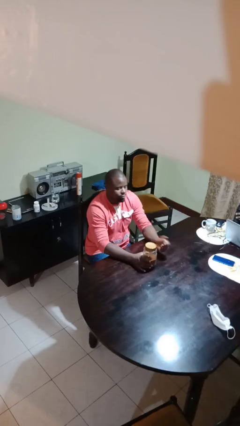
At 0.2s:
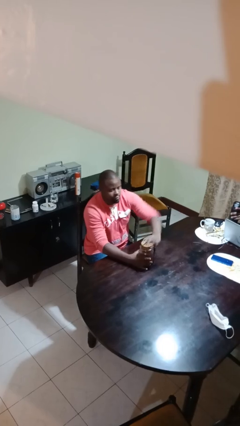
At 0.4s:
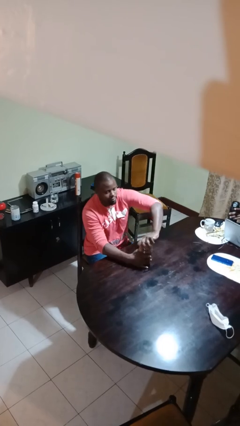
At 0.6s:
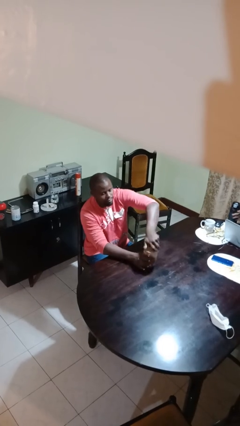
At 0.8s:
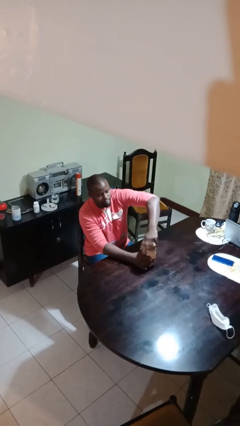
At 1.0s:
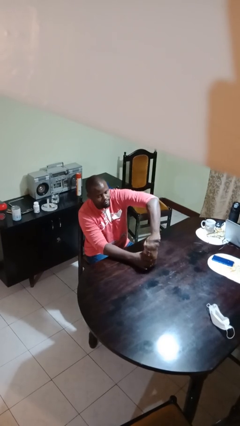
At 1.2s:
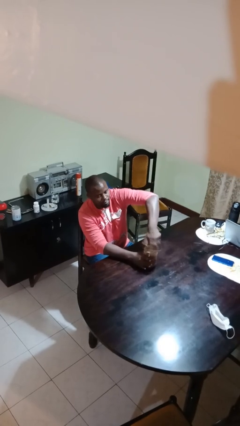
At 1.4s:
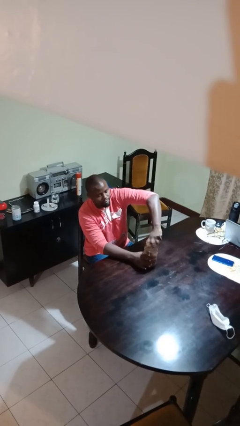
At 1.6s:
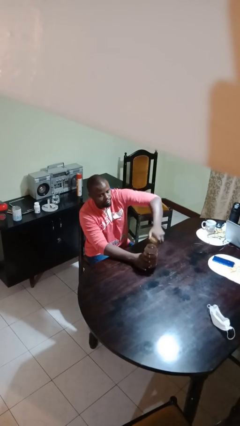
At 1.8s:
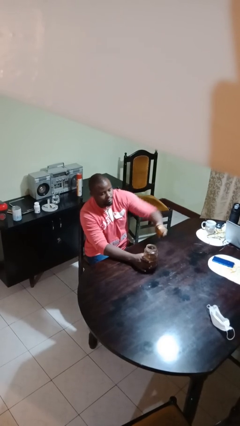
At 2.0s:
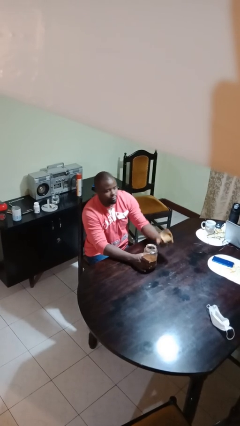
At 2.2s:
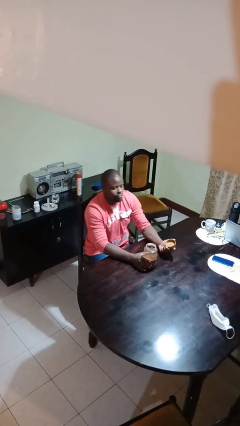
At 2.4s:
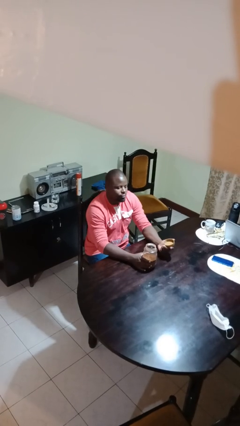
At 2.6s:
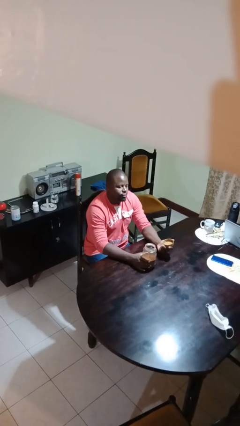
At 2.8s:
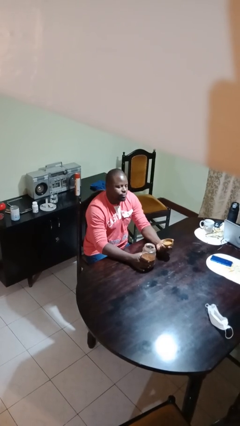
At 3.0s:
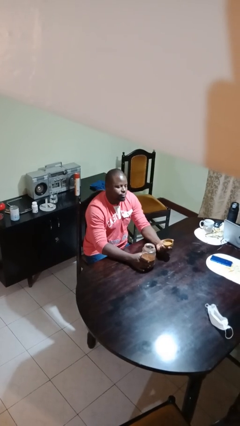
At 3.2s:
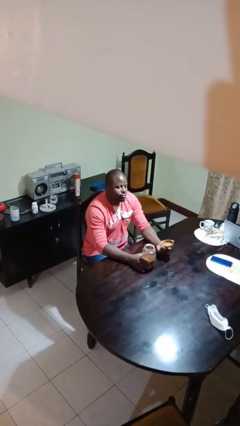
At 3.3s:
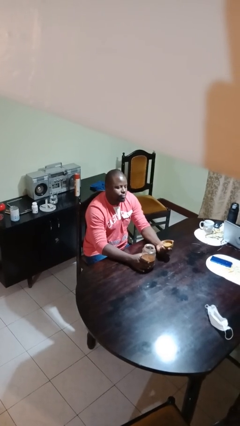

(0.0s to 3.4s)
person opens jar

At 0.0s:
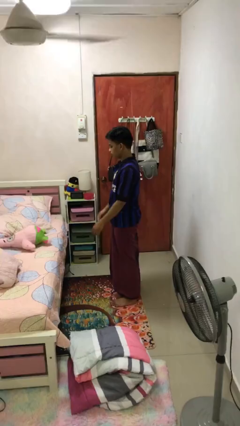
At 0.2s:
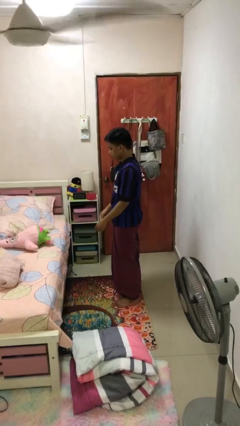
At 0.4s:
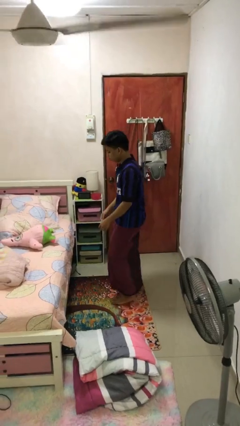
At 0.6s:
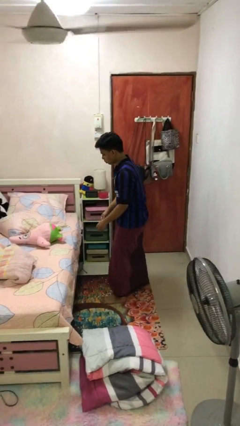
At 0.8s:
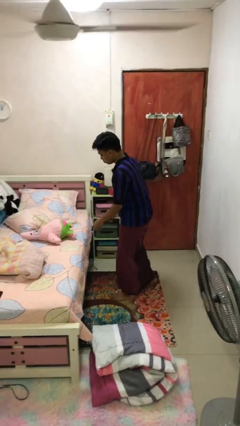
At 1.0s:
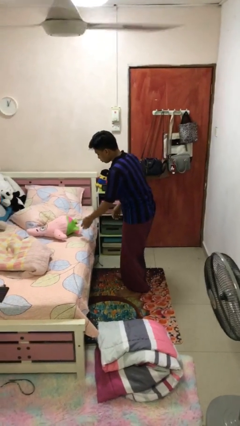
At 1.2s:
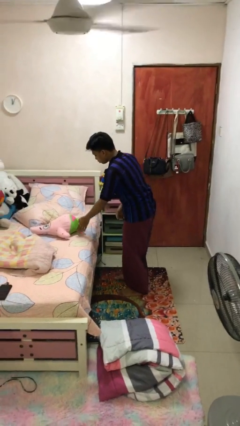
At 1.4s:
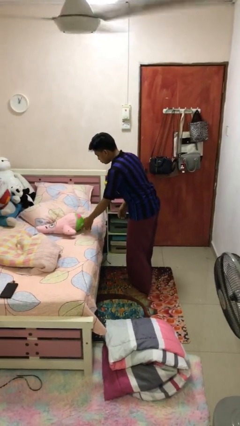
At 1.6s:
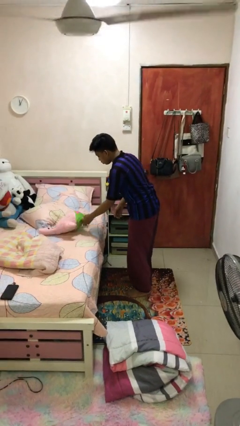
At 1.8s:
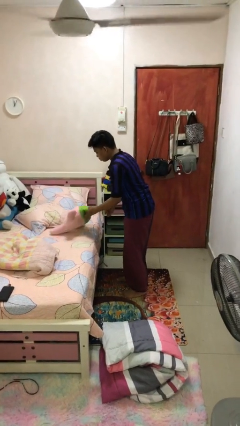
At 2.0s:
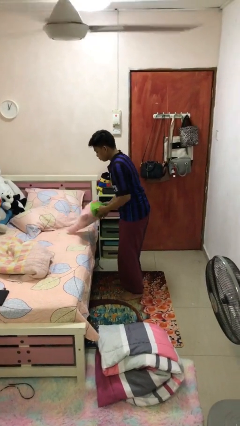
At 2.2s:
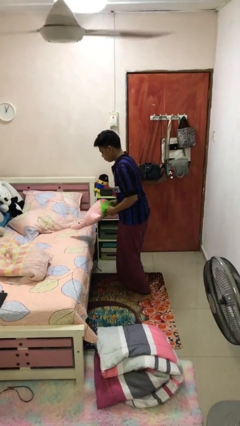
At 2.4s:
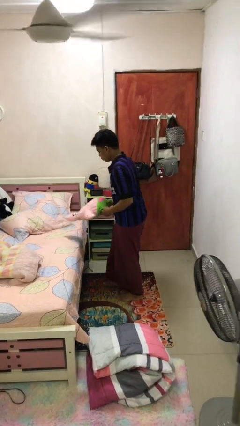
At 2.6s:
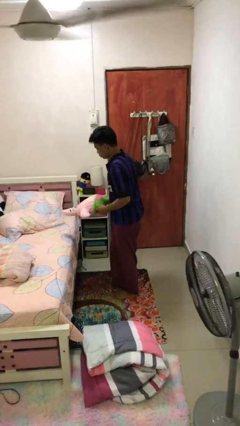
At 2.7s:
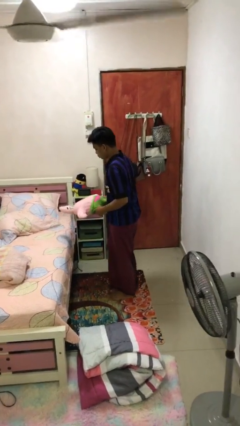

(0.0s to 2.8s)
person picks up object from bed

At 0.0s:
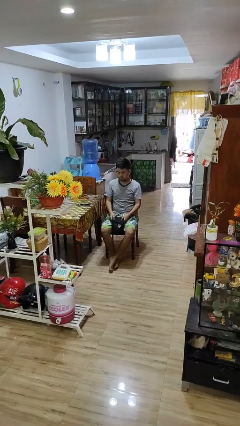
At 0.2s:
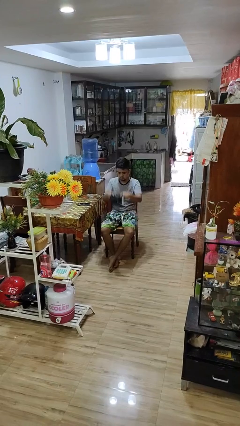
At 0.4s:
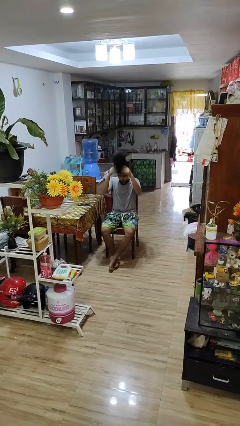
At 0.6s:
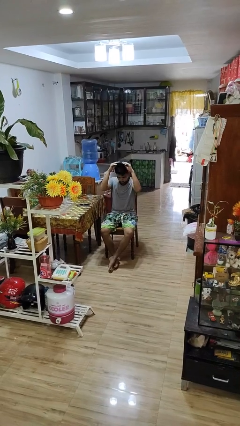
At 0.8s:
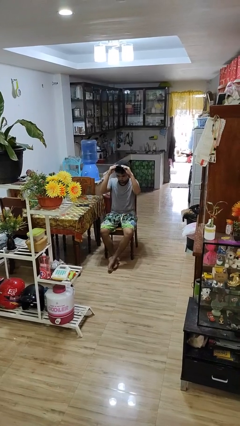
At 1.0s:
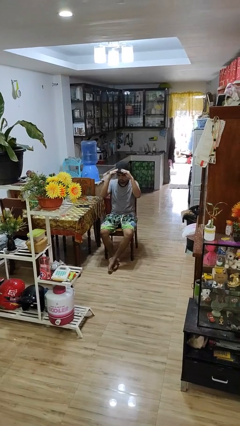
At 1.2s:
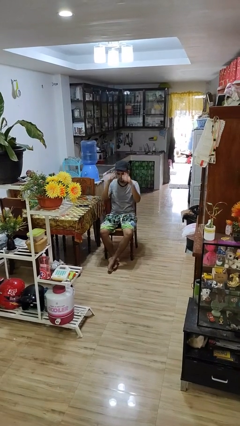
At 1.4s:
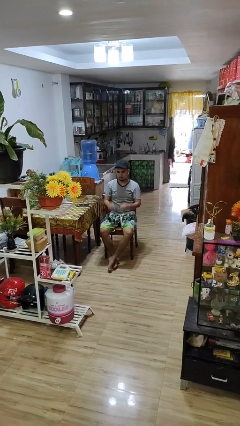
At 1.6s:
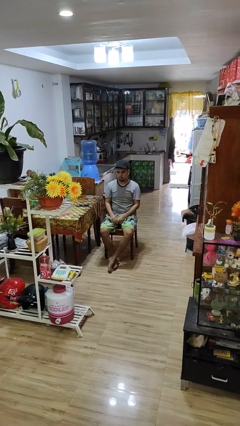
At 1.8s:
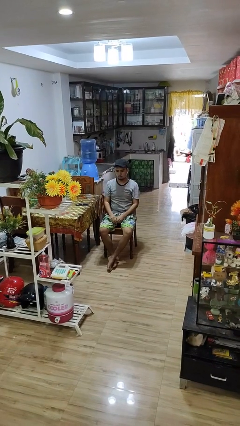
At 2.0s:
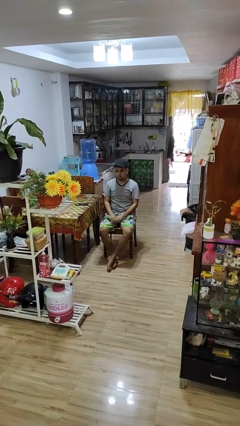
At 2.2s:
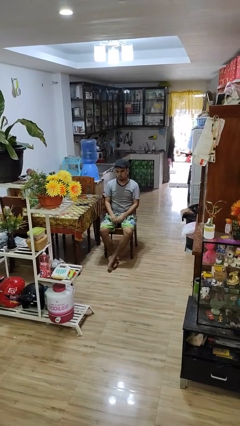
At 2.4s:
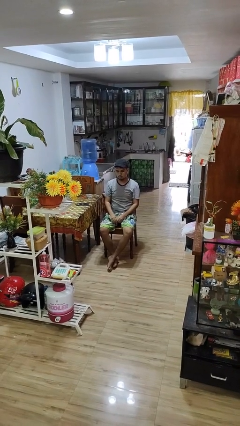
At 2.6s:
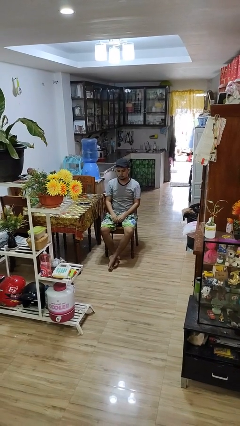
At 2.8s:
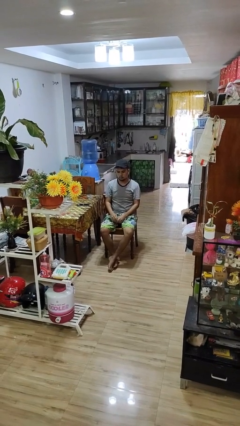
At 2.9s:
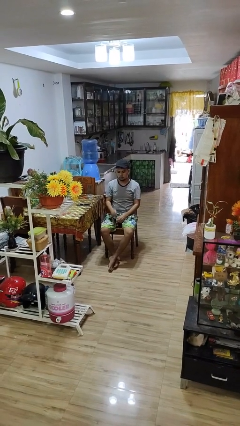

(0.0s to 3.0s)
person puts on hat

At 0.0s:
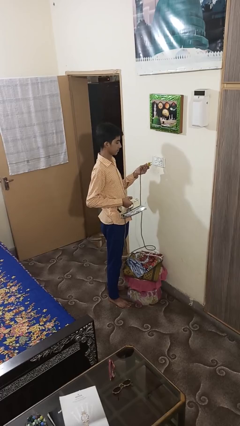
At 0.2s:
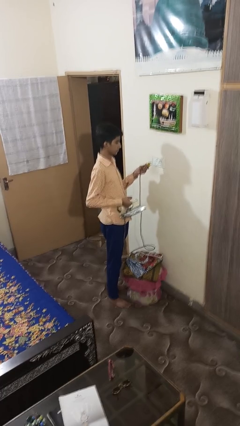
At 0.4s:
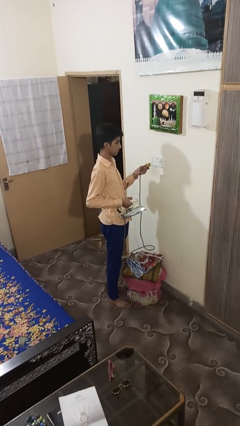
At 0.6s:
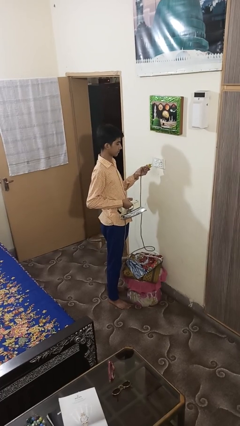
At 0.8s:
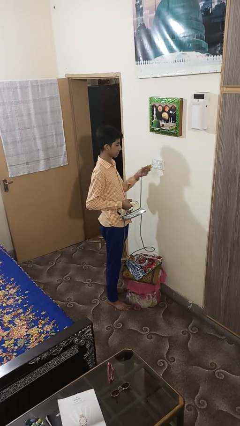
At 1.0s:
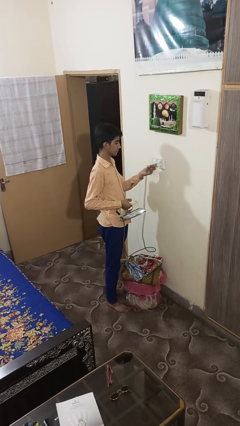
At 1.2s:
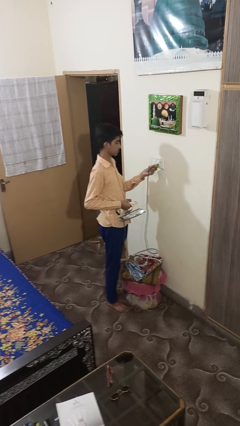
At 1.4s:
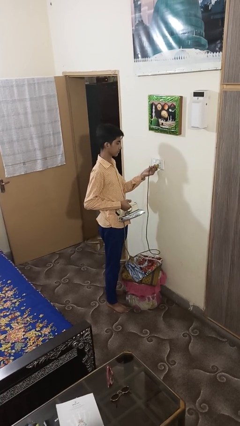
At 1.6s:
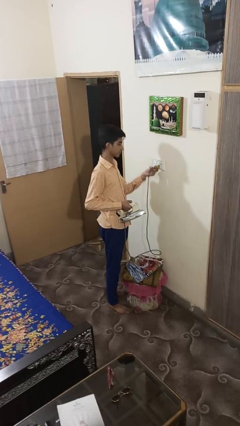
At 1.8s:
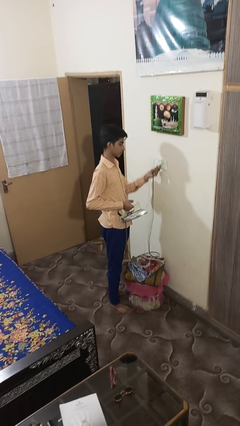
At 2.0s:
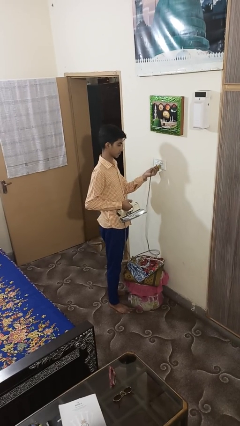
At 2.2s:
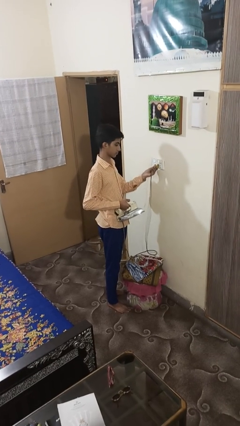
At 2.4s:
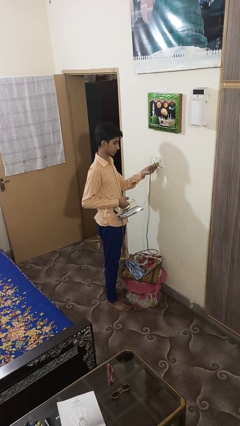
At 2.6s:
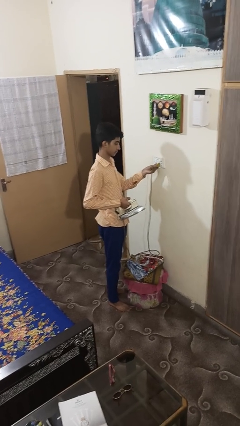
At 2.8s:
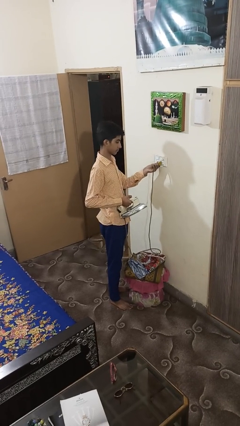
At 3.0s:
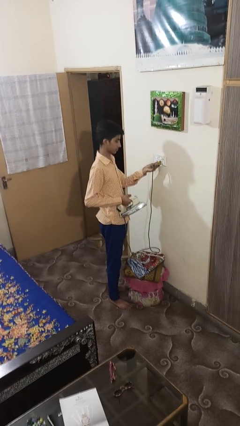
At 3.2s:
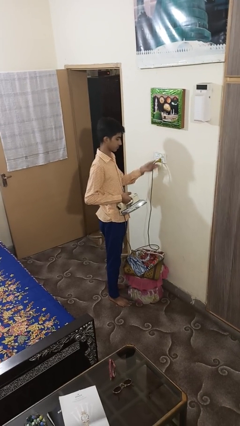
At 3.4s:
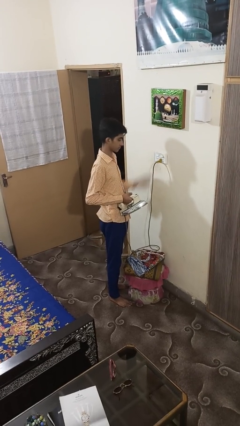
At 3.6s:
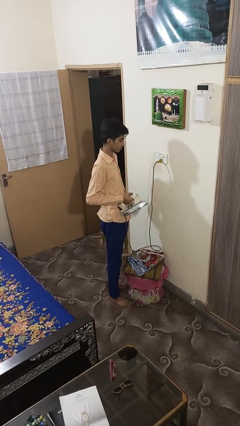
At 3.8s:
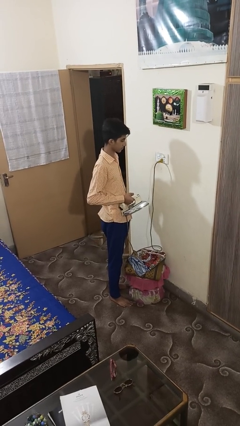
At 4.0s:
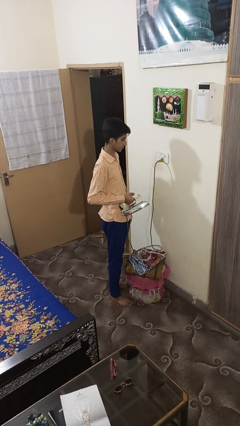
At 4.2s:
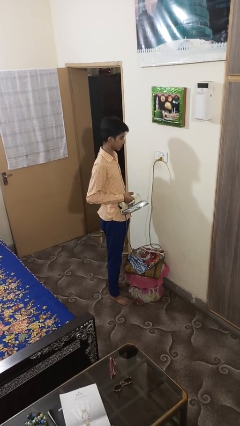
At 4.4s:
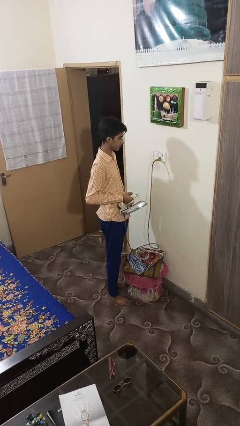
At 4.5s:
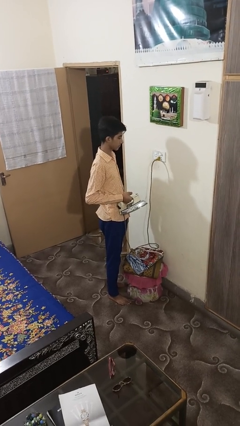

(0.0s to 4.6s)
person plugs into electrical socket

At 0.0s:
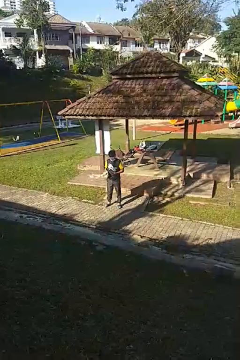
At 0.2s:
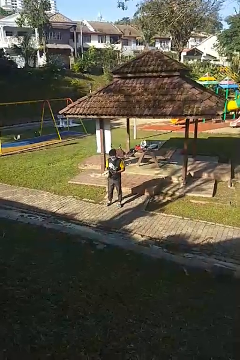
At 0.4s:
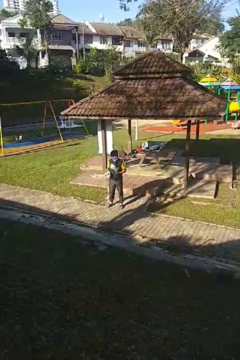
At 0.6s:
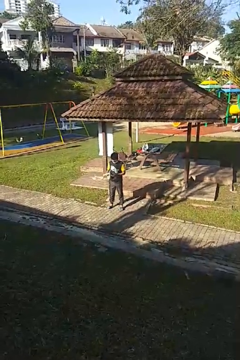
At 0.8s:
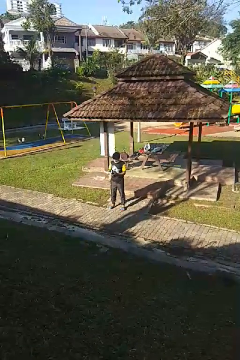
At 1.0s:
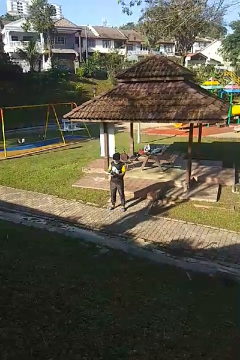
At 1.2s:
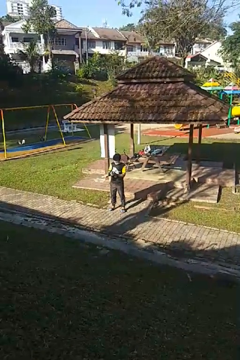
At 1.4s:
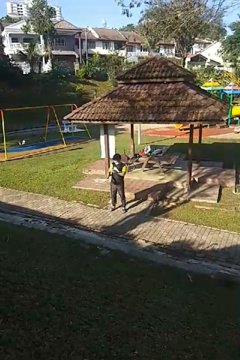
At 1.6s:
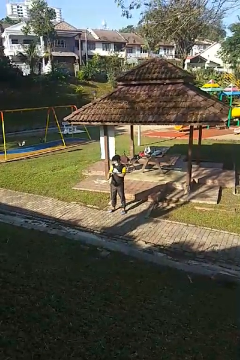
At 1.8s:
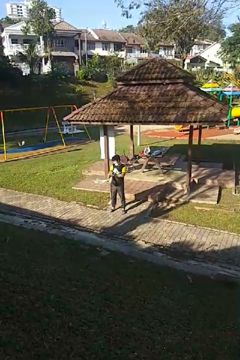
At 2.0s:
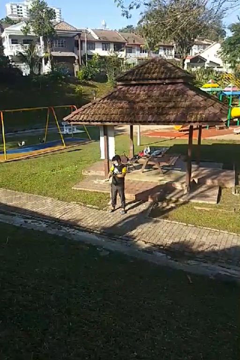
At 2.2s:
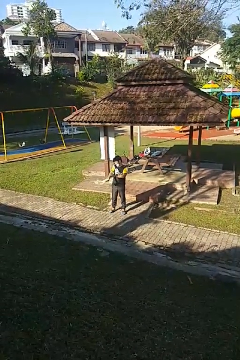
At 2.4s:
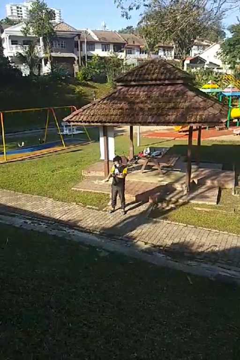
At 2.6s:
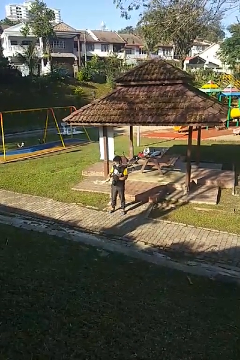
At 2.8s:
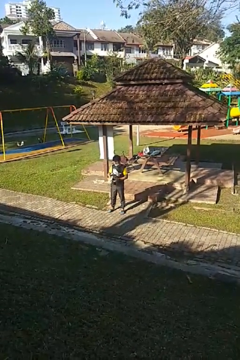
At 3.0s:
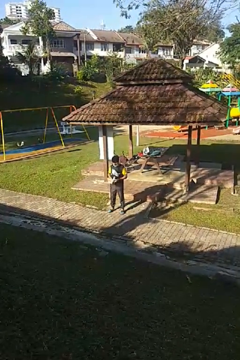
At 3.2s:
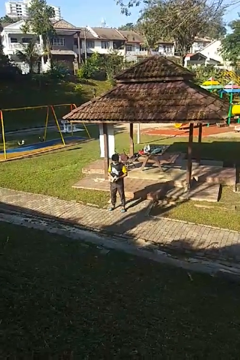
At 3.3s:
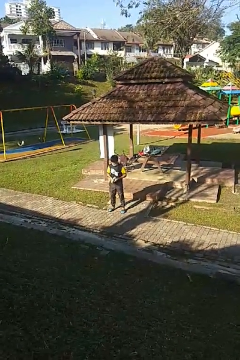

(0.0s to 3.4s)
person applies sunscreen

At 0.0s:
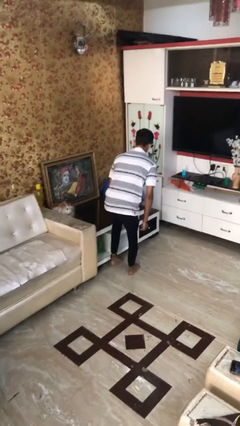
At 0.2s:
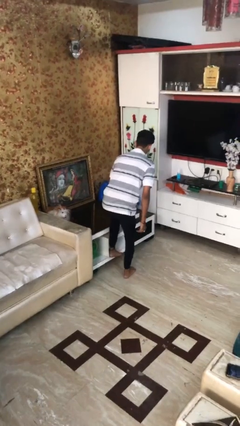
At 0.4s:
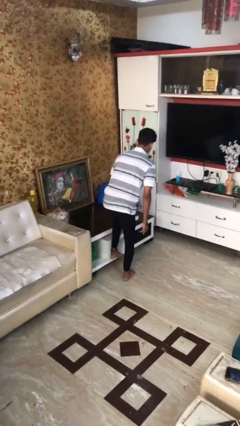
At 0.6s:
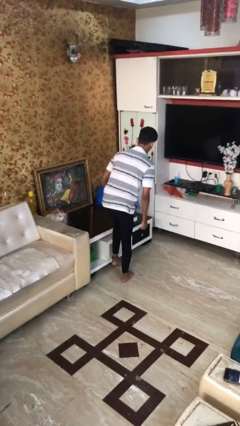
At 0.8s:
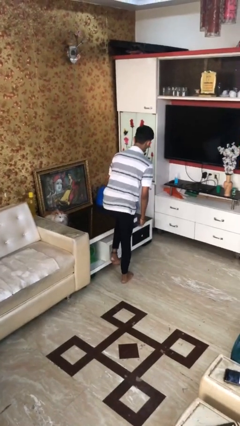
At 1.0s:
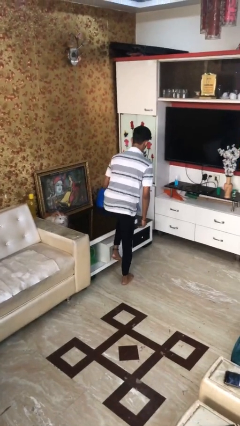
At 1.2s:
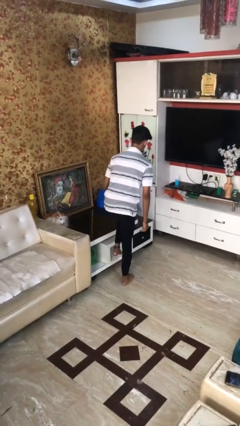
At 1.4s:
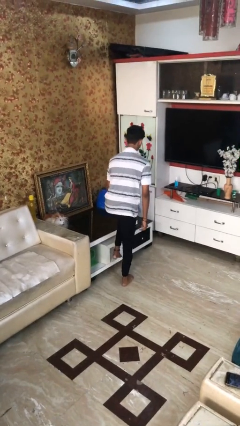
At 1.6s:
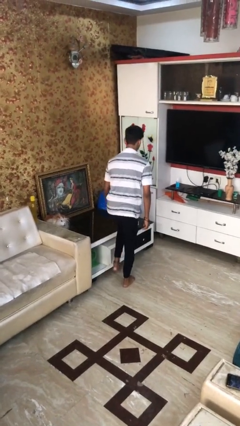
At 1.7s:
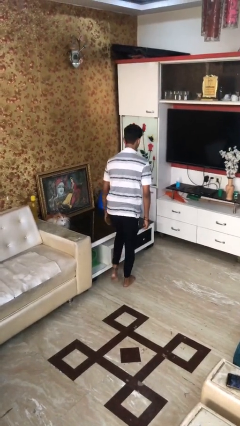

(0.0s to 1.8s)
person bumps into table
